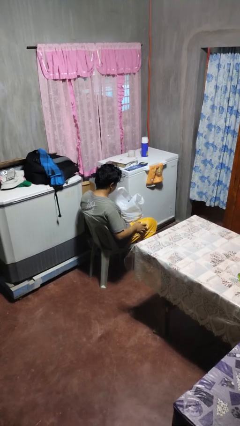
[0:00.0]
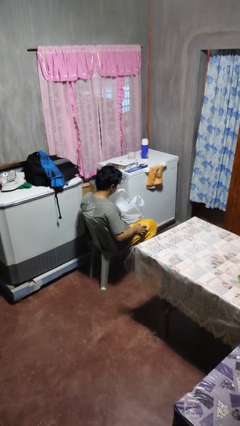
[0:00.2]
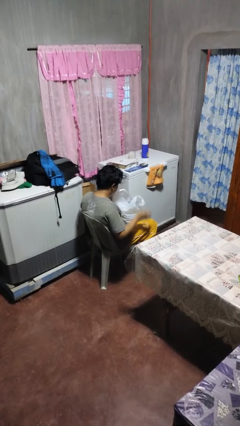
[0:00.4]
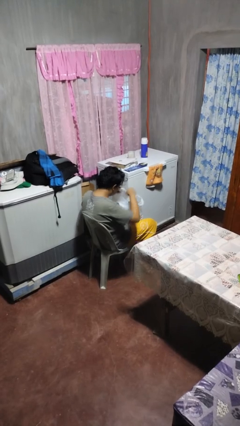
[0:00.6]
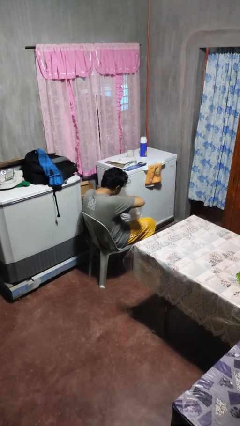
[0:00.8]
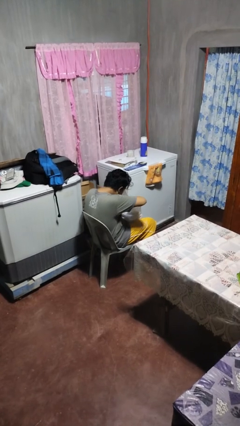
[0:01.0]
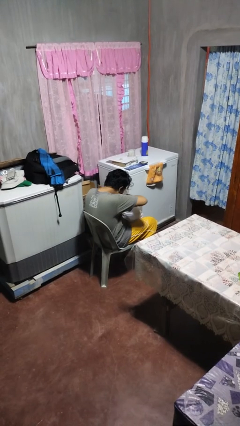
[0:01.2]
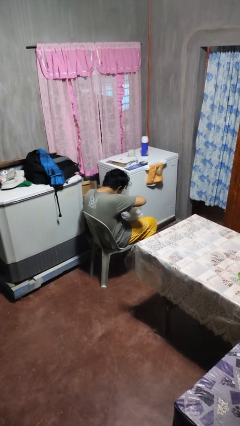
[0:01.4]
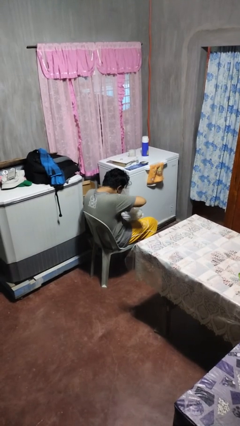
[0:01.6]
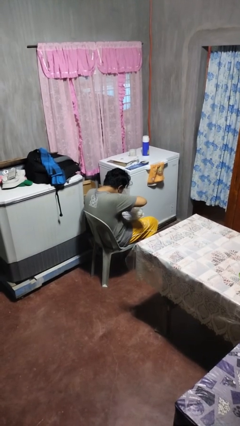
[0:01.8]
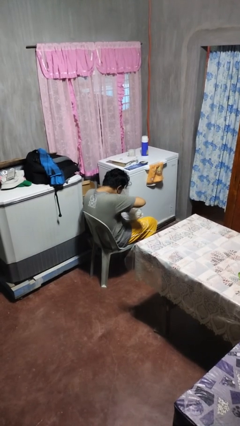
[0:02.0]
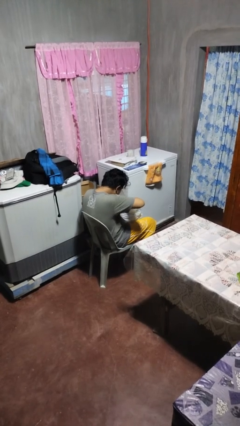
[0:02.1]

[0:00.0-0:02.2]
person searches in bag

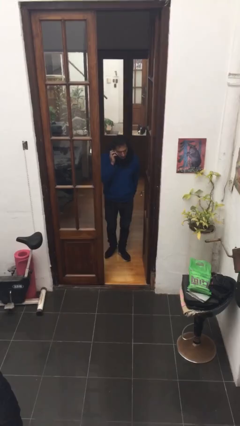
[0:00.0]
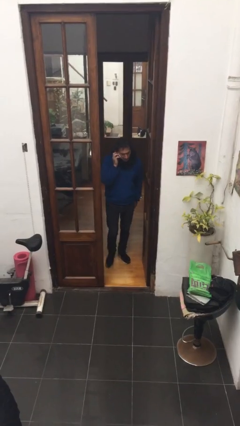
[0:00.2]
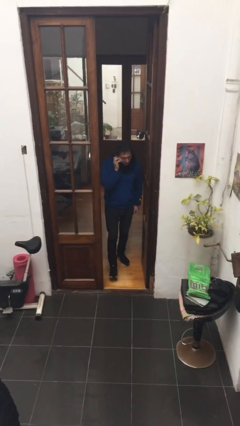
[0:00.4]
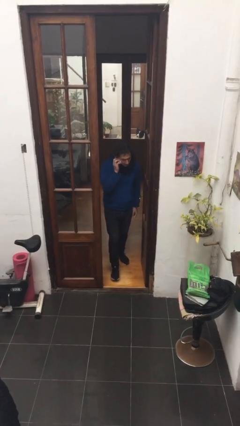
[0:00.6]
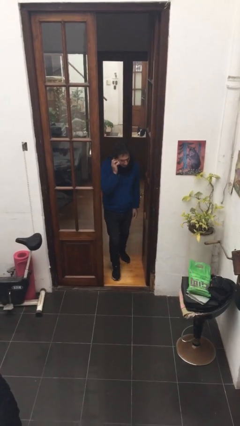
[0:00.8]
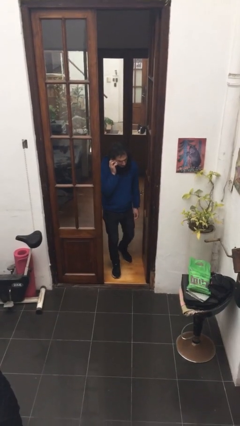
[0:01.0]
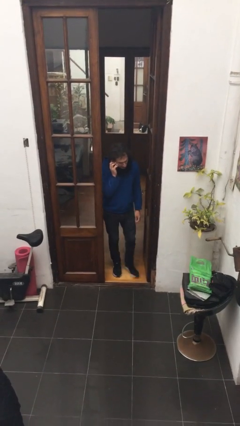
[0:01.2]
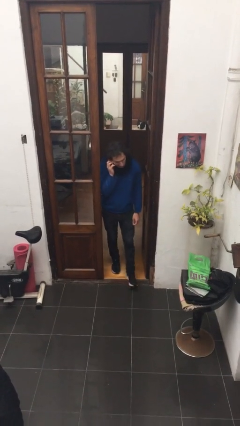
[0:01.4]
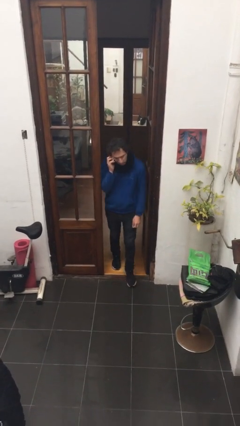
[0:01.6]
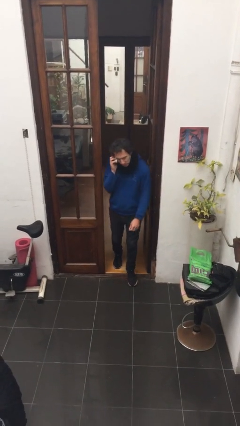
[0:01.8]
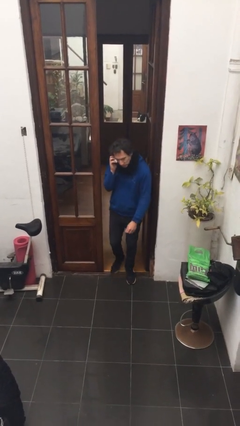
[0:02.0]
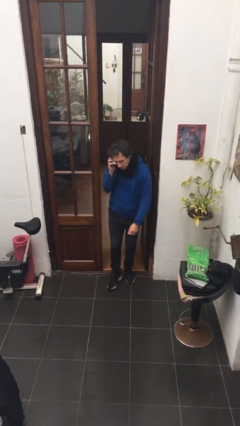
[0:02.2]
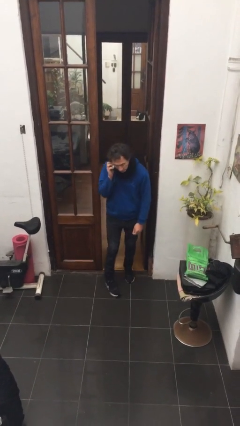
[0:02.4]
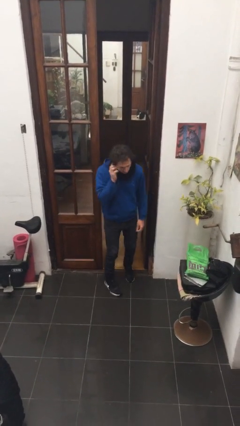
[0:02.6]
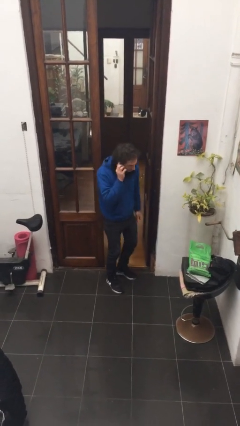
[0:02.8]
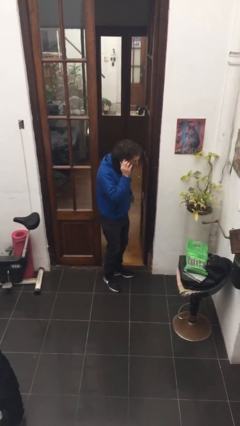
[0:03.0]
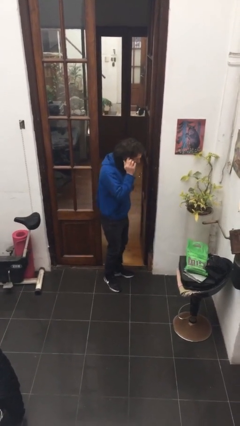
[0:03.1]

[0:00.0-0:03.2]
person enters scene through structure

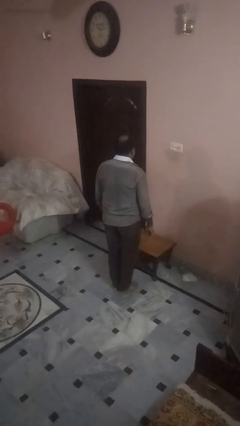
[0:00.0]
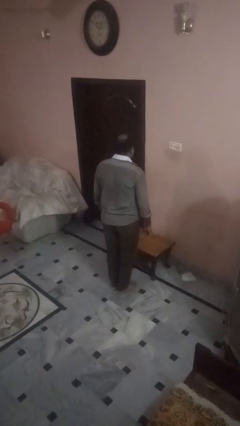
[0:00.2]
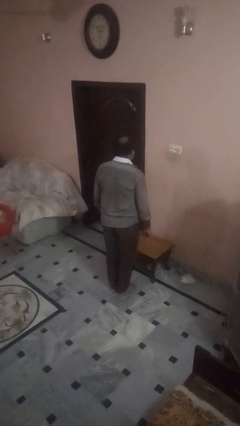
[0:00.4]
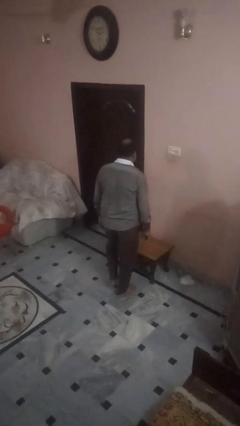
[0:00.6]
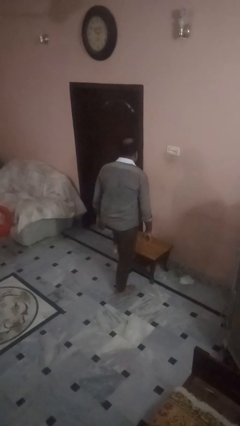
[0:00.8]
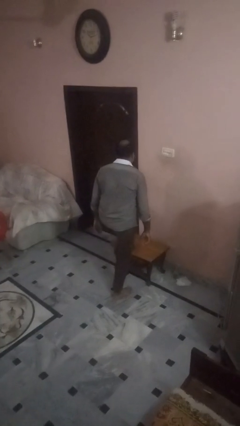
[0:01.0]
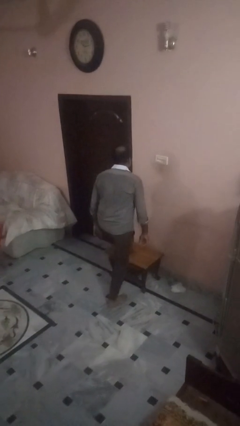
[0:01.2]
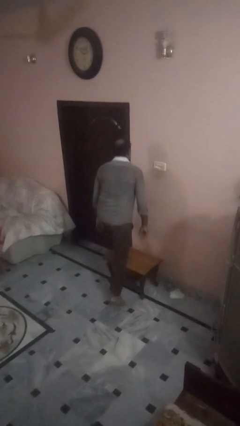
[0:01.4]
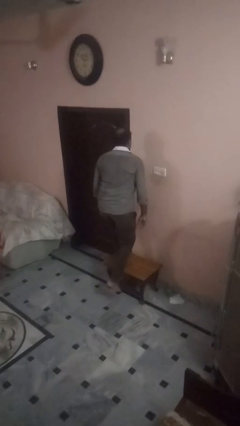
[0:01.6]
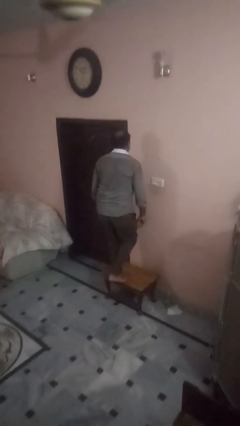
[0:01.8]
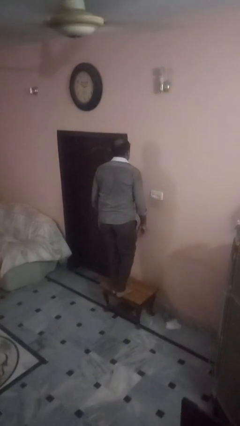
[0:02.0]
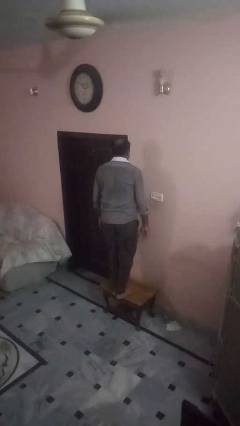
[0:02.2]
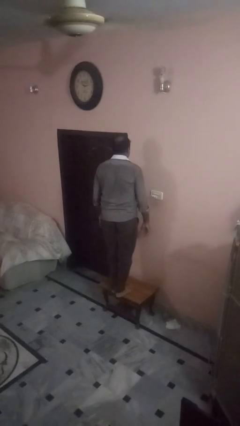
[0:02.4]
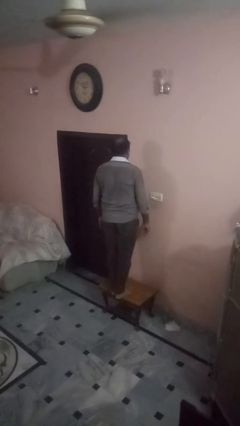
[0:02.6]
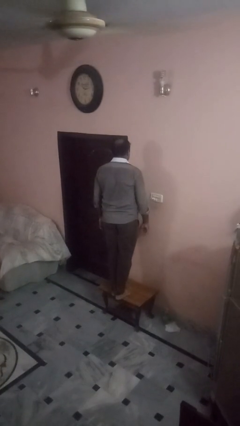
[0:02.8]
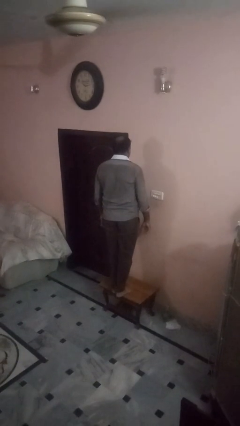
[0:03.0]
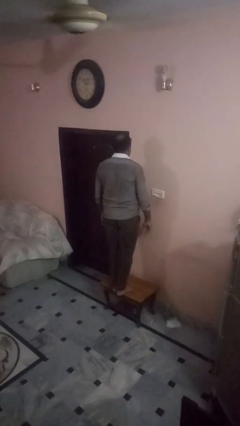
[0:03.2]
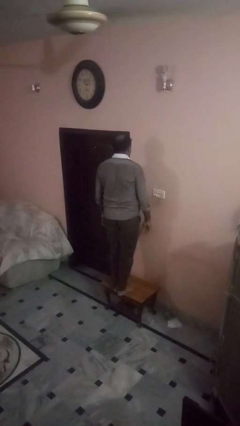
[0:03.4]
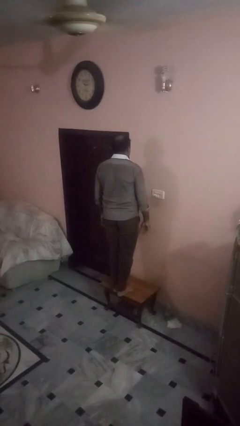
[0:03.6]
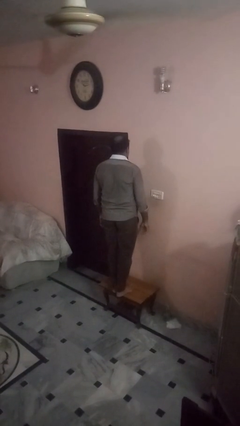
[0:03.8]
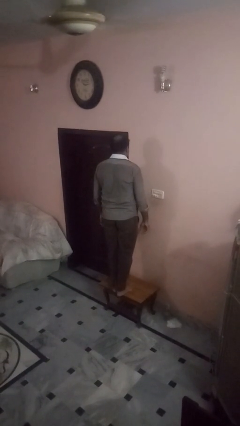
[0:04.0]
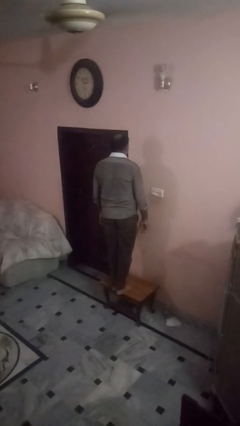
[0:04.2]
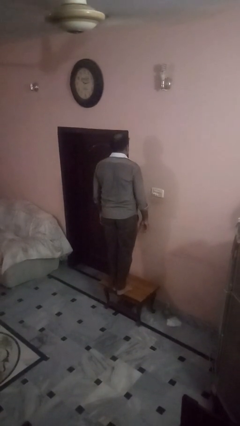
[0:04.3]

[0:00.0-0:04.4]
person climbs on table

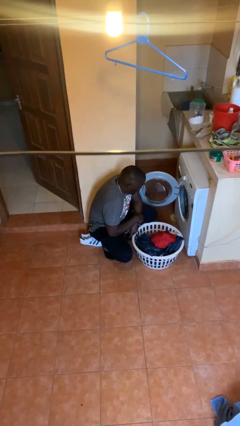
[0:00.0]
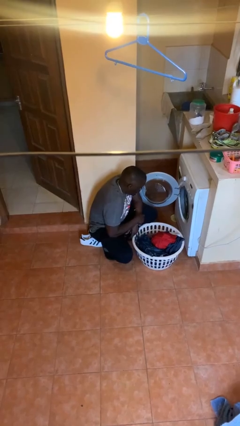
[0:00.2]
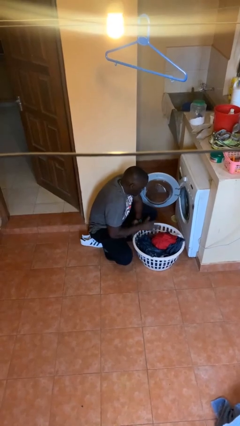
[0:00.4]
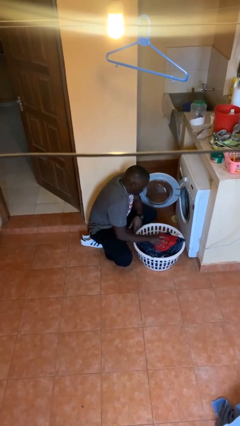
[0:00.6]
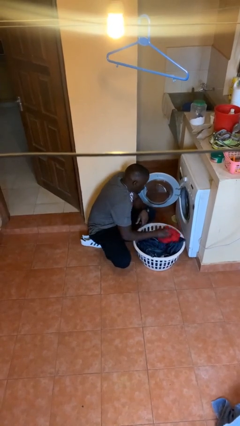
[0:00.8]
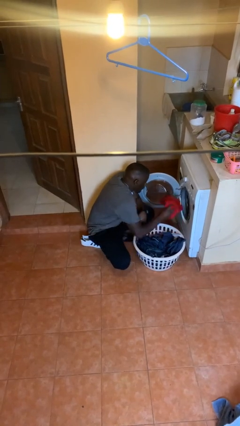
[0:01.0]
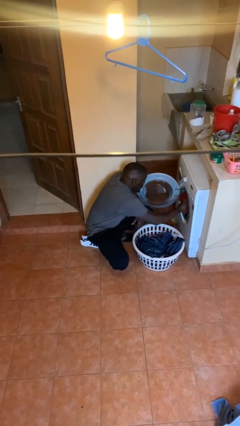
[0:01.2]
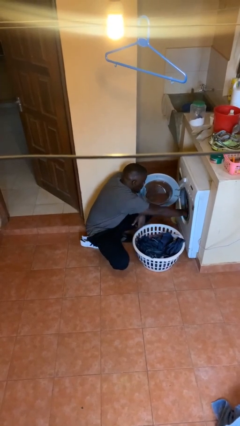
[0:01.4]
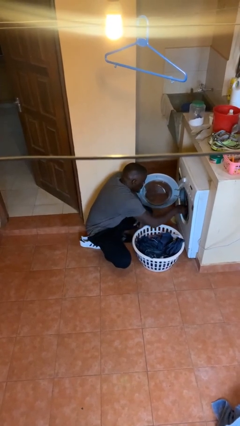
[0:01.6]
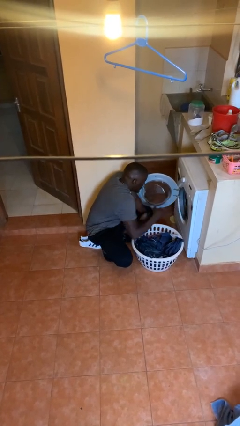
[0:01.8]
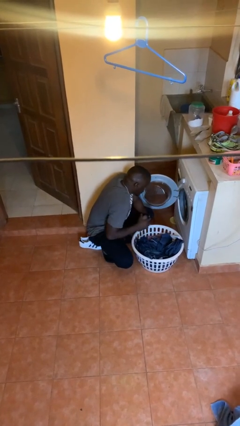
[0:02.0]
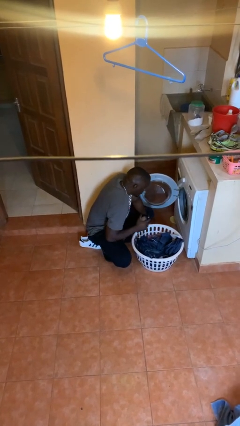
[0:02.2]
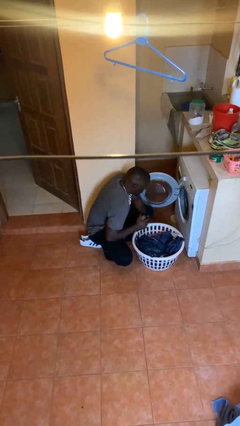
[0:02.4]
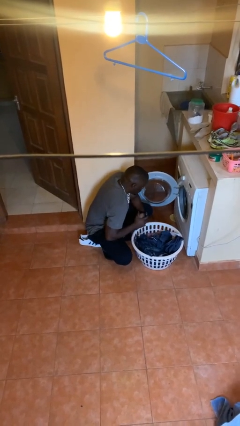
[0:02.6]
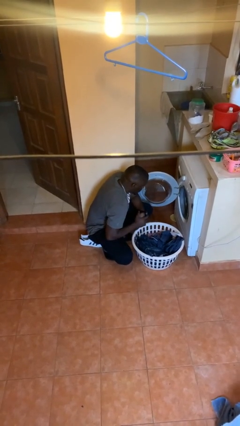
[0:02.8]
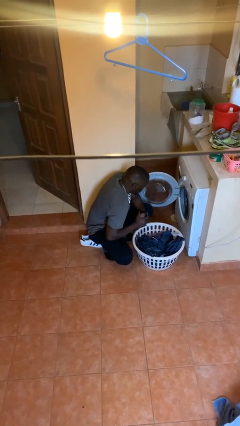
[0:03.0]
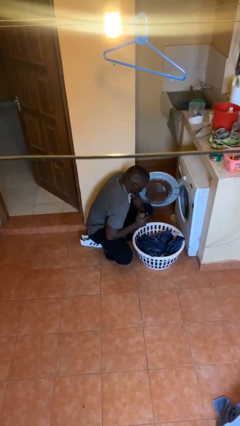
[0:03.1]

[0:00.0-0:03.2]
person loads dryer

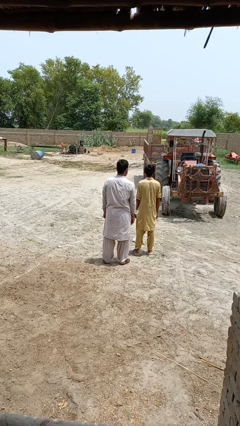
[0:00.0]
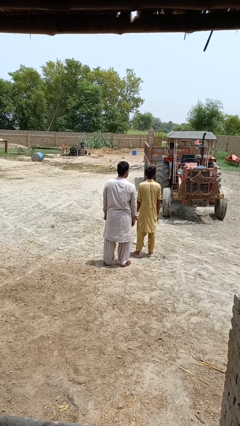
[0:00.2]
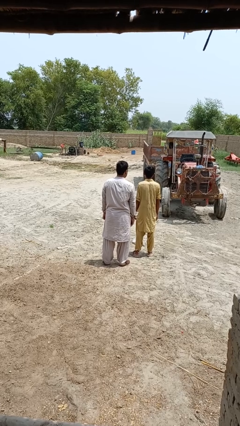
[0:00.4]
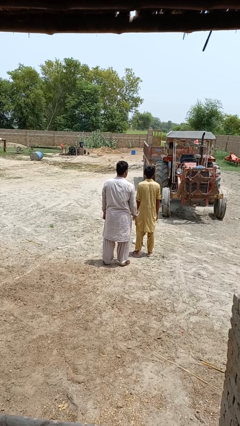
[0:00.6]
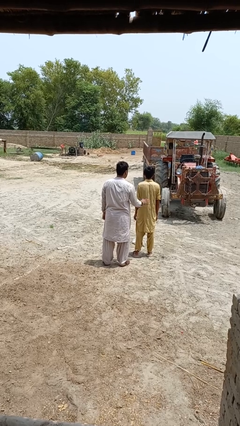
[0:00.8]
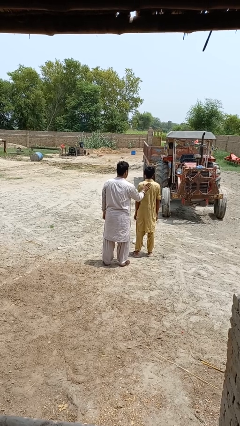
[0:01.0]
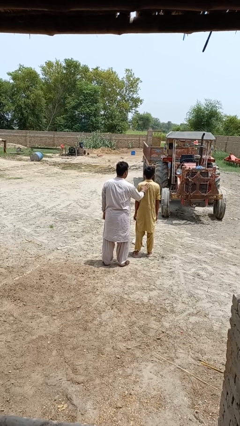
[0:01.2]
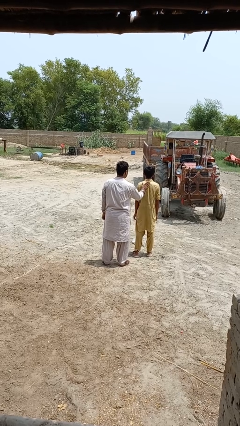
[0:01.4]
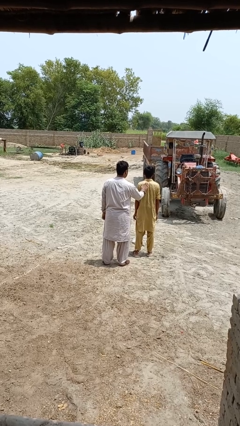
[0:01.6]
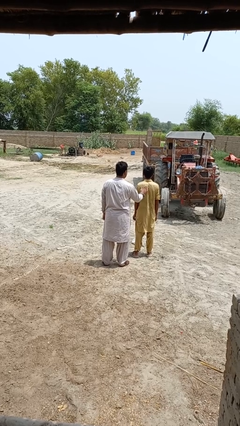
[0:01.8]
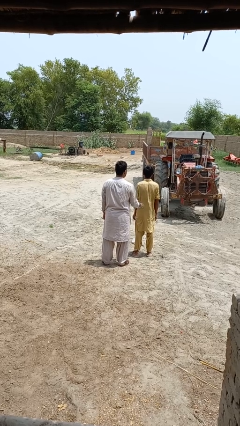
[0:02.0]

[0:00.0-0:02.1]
person touches back of person

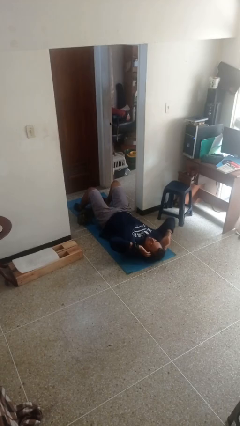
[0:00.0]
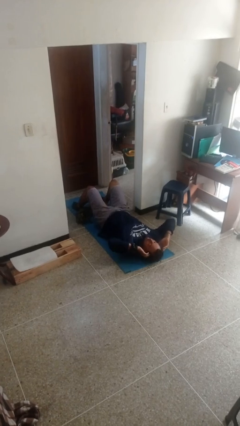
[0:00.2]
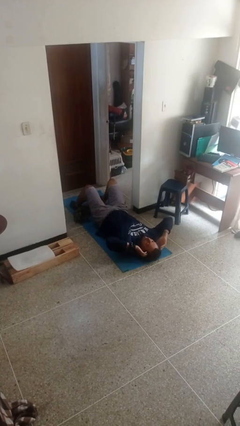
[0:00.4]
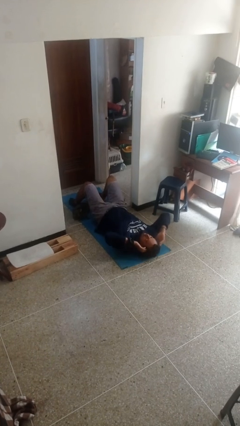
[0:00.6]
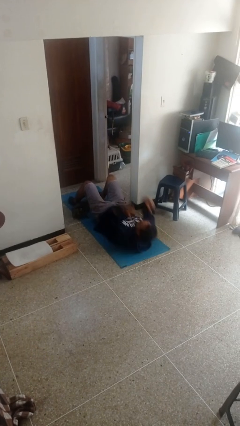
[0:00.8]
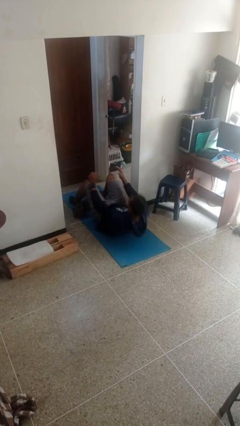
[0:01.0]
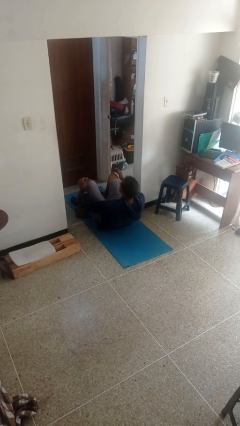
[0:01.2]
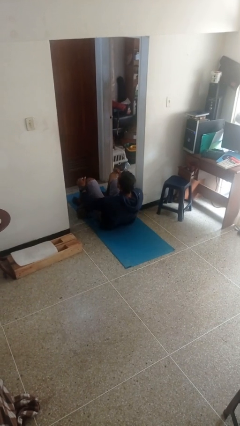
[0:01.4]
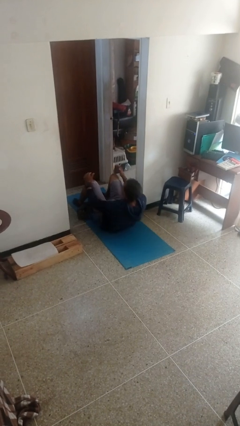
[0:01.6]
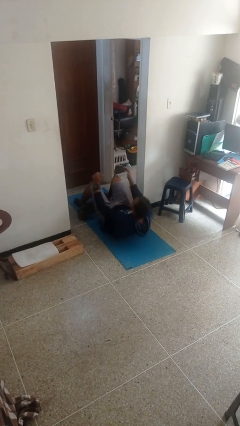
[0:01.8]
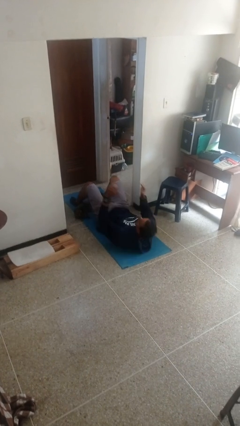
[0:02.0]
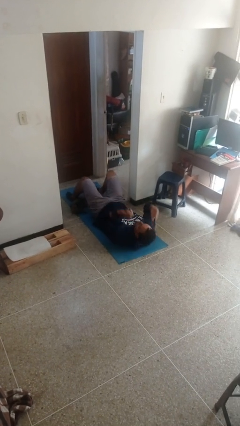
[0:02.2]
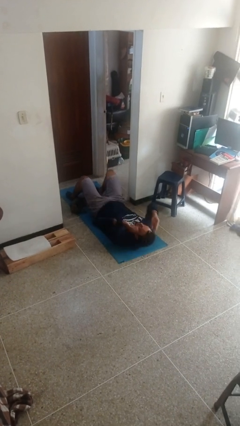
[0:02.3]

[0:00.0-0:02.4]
person exercises with situp

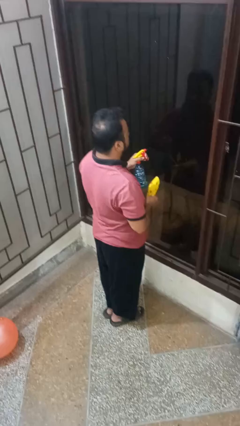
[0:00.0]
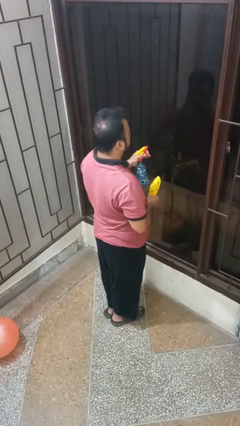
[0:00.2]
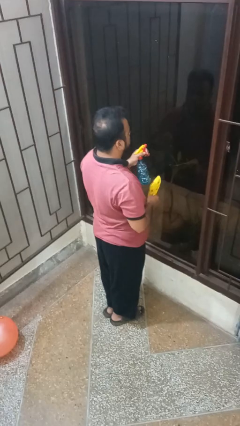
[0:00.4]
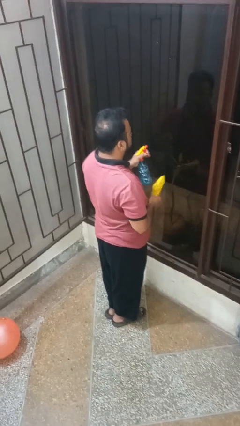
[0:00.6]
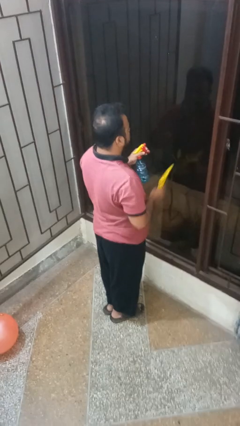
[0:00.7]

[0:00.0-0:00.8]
person sprays from bottle
